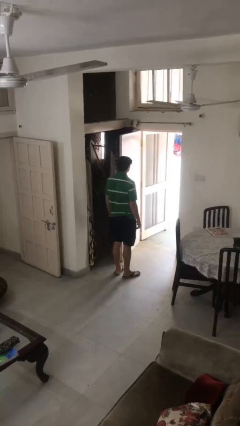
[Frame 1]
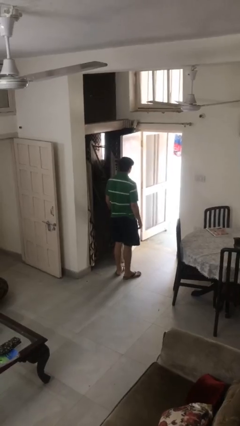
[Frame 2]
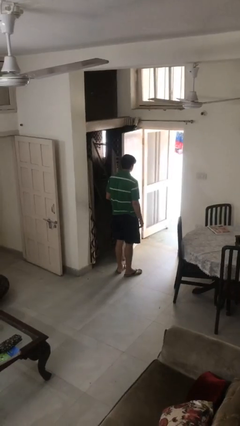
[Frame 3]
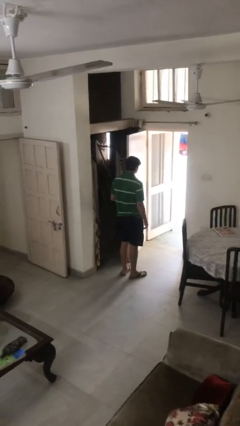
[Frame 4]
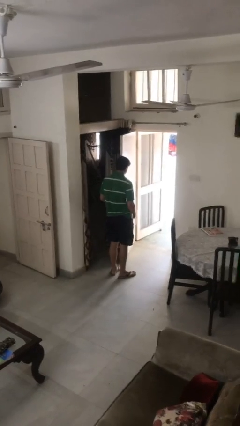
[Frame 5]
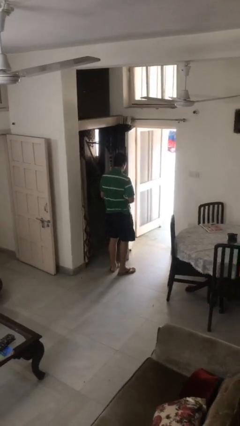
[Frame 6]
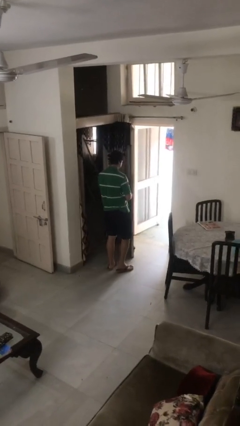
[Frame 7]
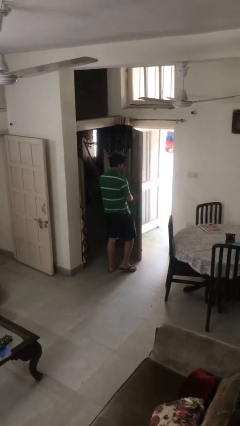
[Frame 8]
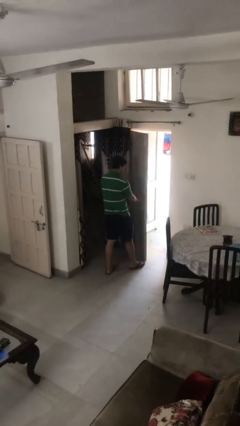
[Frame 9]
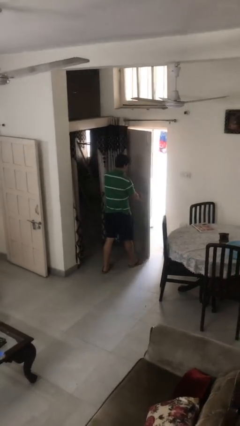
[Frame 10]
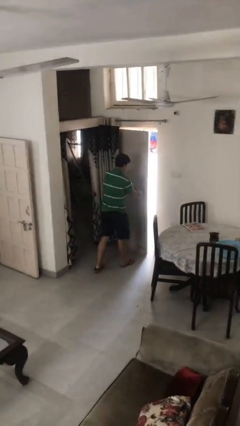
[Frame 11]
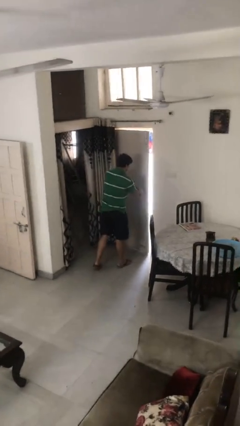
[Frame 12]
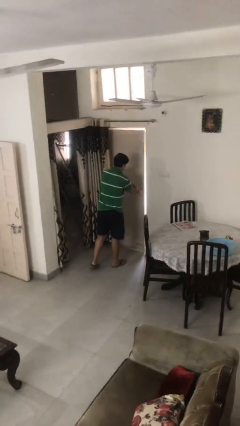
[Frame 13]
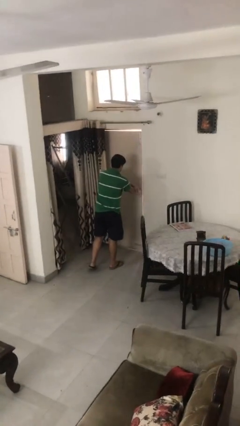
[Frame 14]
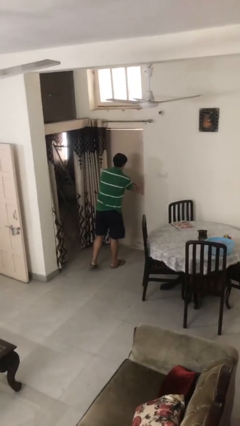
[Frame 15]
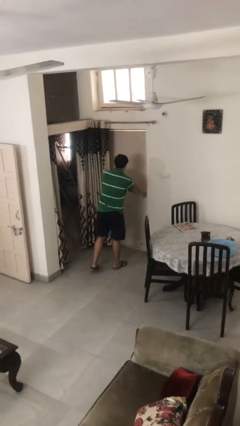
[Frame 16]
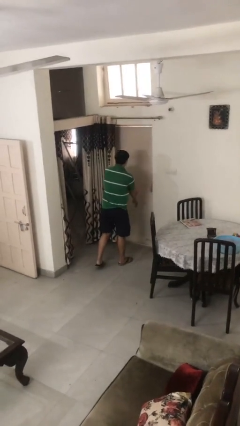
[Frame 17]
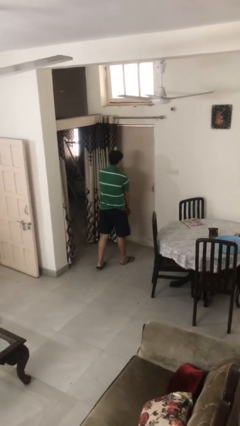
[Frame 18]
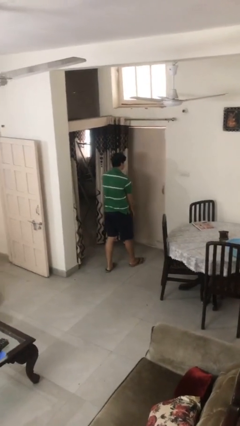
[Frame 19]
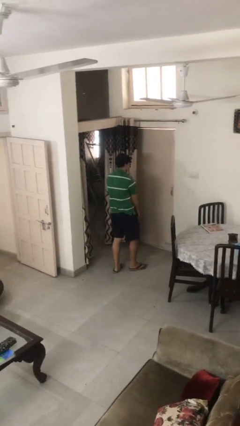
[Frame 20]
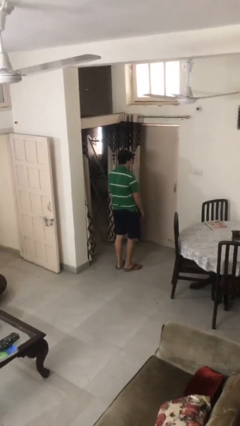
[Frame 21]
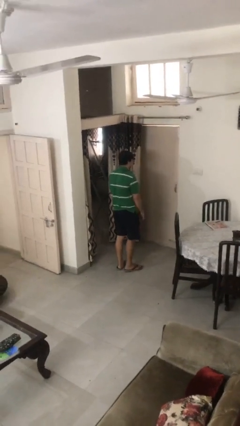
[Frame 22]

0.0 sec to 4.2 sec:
person closes facility door

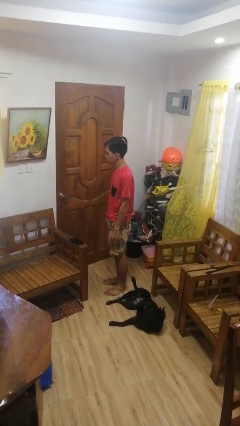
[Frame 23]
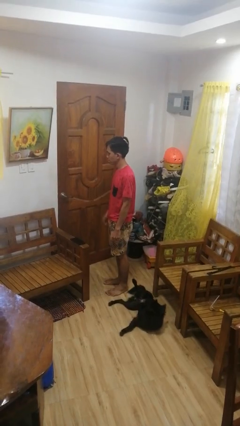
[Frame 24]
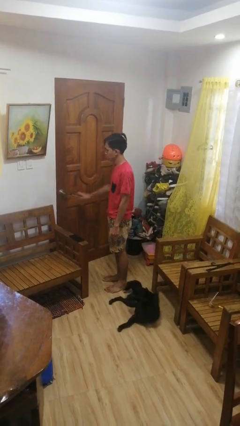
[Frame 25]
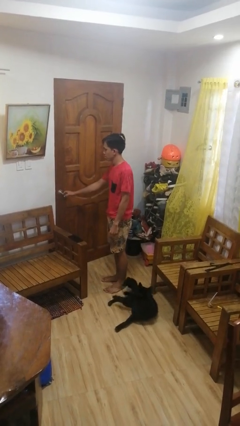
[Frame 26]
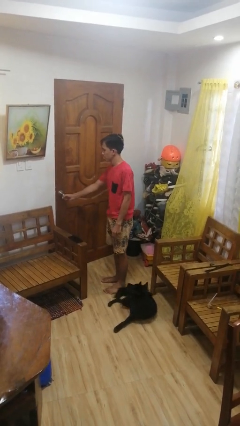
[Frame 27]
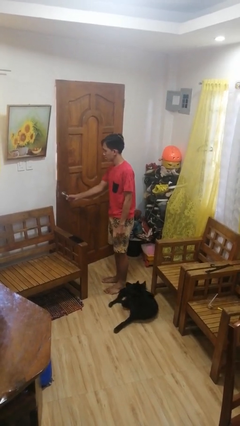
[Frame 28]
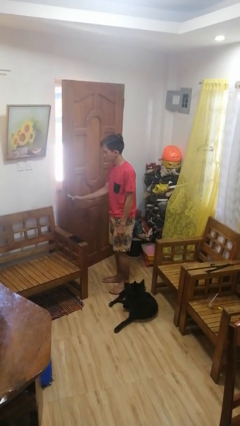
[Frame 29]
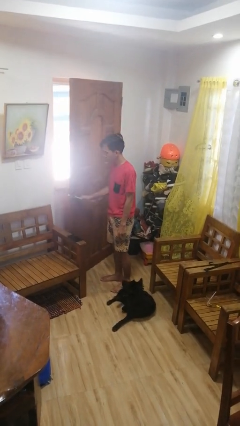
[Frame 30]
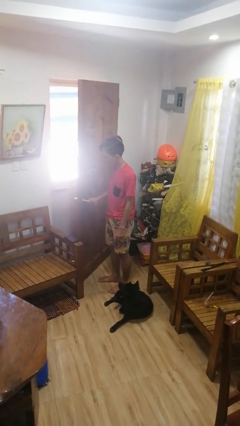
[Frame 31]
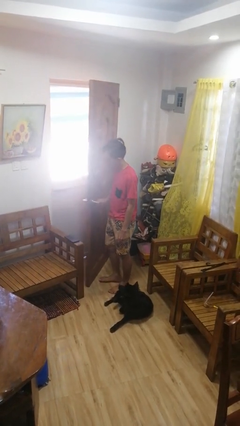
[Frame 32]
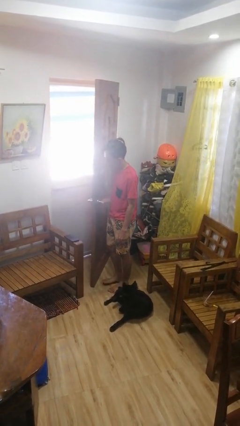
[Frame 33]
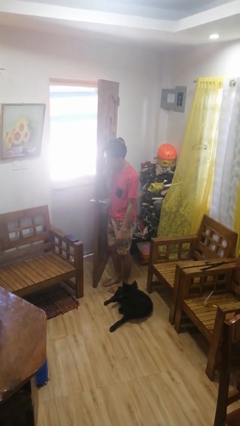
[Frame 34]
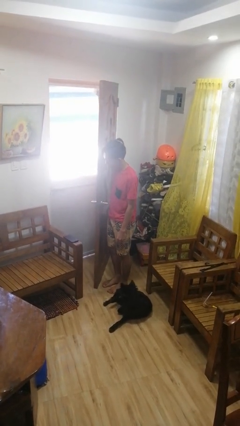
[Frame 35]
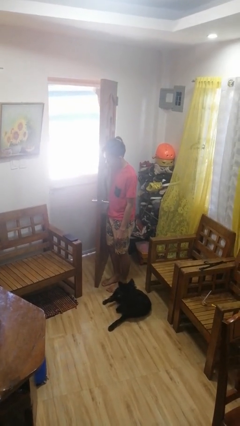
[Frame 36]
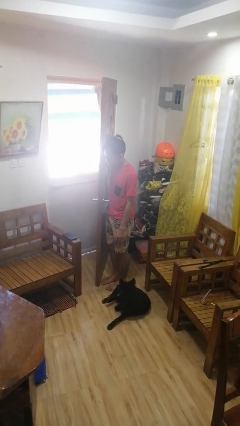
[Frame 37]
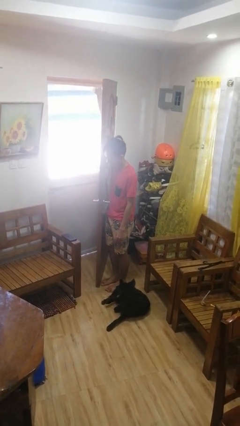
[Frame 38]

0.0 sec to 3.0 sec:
person opens facility door

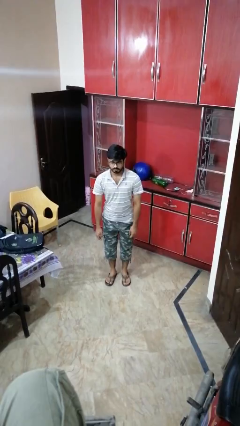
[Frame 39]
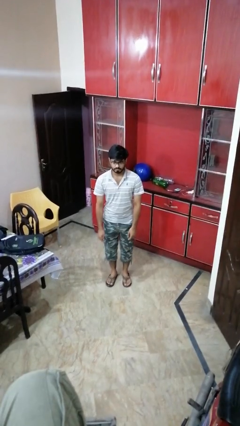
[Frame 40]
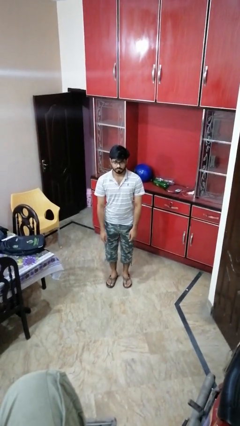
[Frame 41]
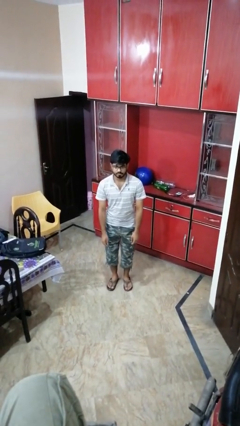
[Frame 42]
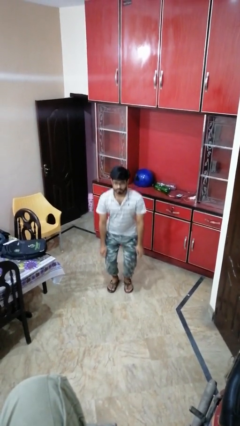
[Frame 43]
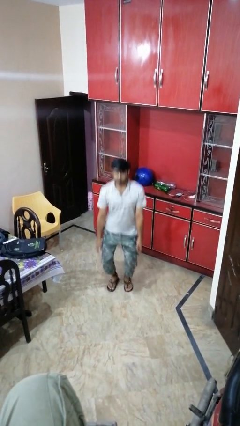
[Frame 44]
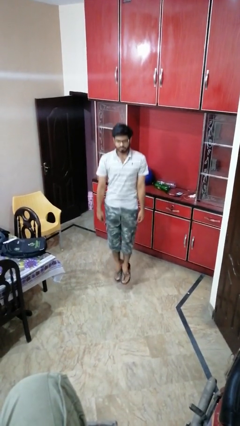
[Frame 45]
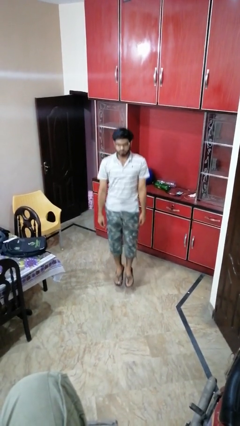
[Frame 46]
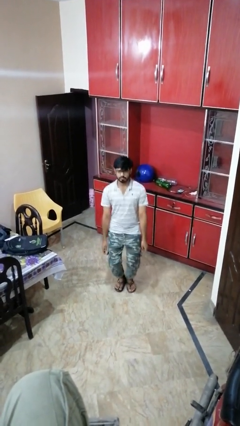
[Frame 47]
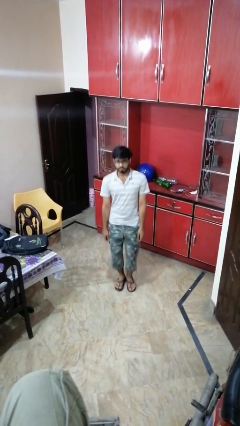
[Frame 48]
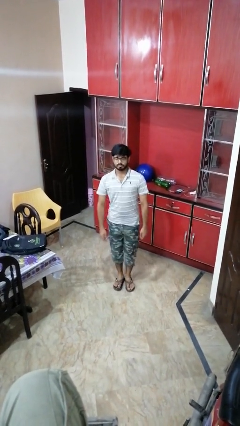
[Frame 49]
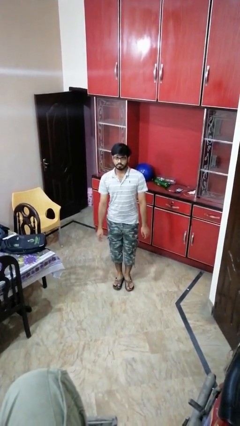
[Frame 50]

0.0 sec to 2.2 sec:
person jumps

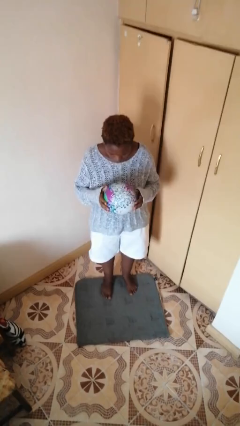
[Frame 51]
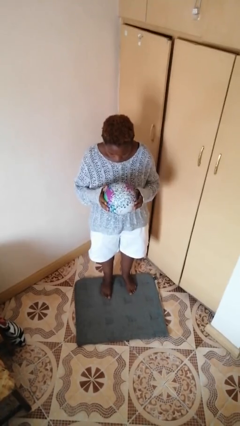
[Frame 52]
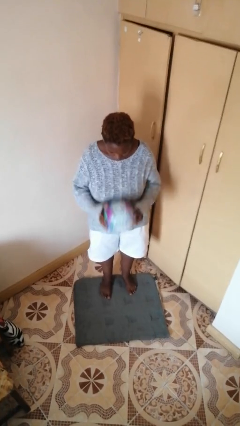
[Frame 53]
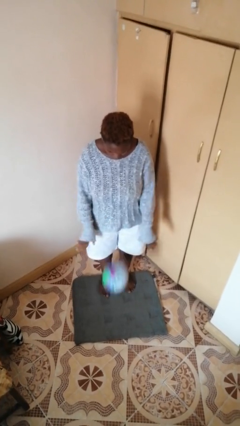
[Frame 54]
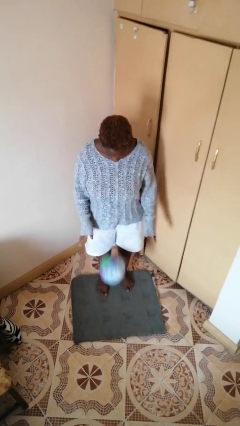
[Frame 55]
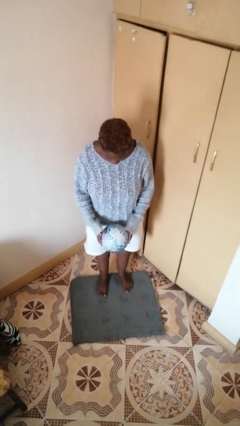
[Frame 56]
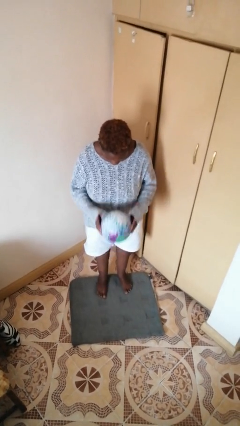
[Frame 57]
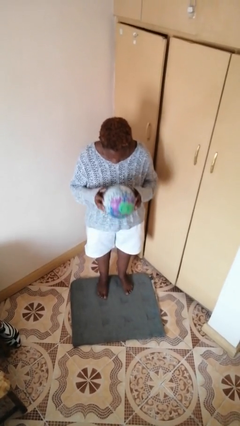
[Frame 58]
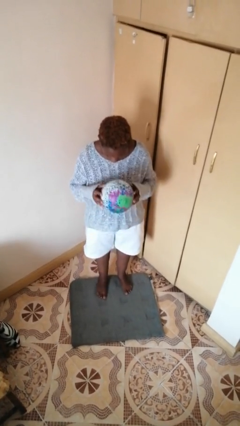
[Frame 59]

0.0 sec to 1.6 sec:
person bounces ball on floor

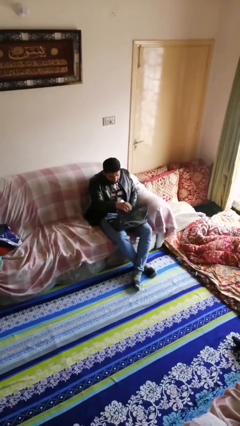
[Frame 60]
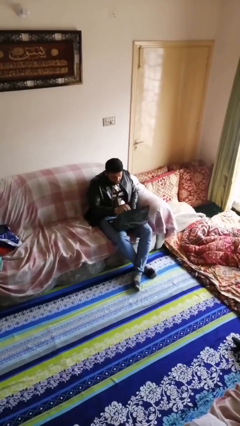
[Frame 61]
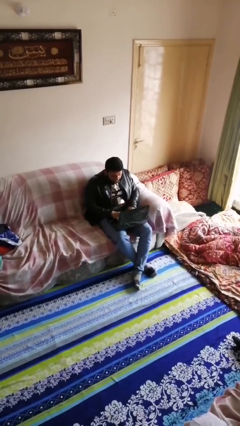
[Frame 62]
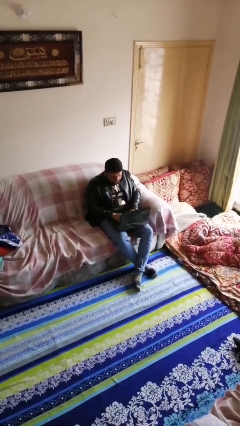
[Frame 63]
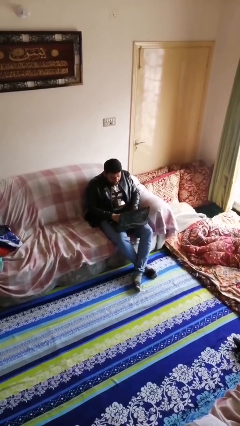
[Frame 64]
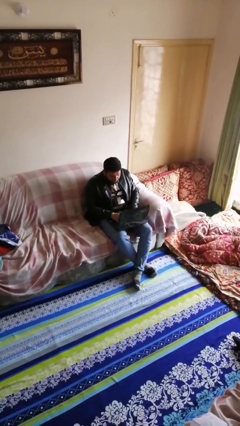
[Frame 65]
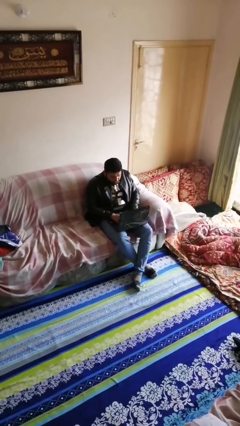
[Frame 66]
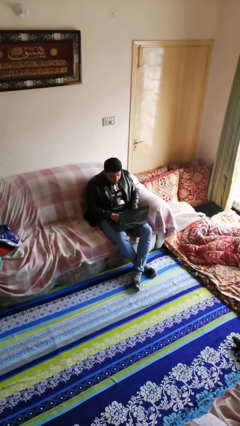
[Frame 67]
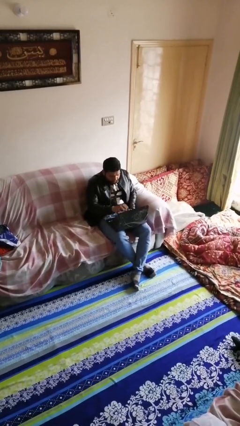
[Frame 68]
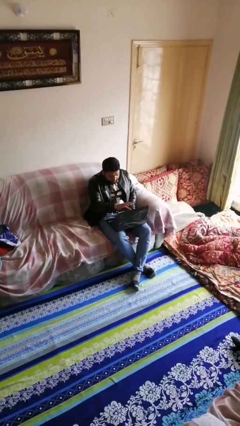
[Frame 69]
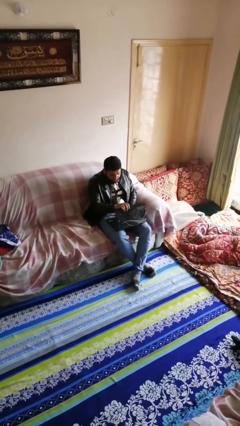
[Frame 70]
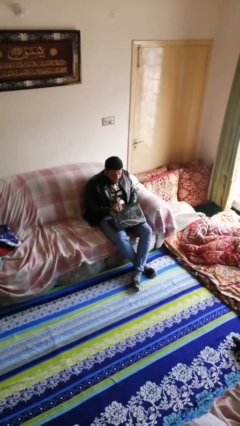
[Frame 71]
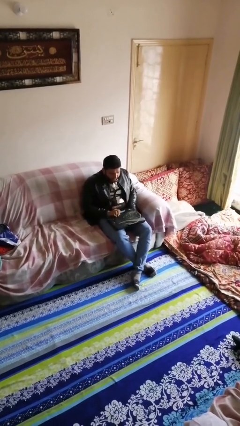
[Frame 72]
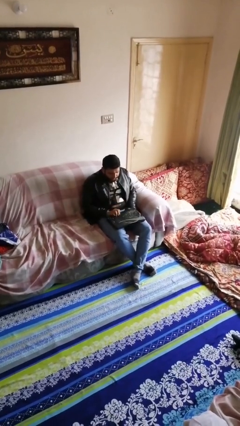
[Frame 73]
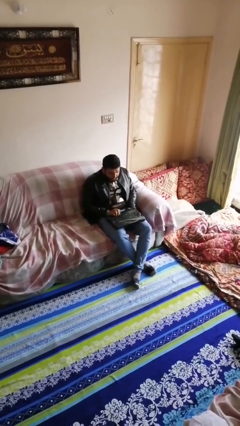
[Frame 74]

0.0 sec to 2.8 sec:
person interacts with laptop

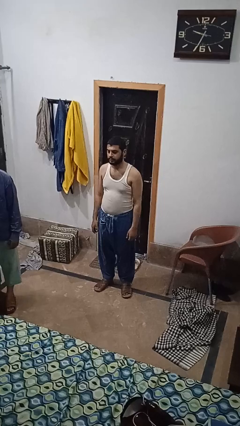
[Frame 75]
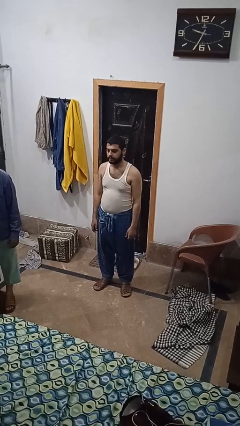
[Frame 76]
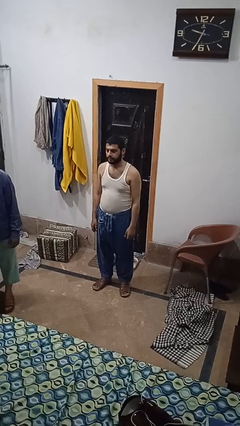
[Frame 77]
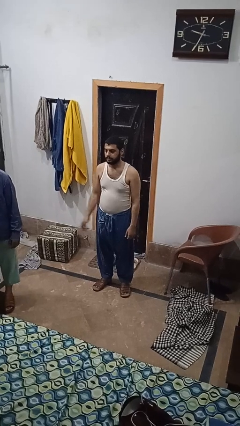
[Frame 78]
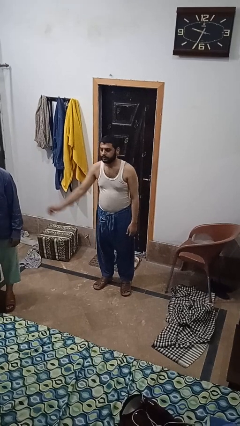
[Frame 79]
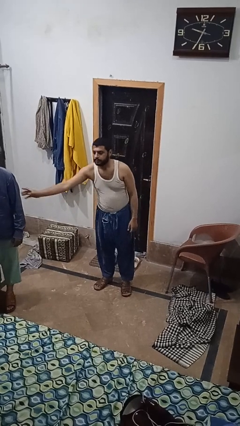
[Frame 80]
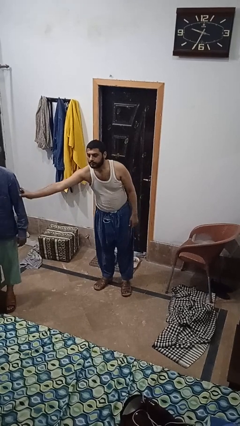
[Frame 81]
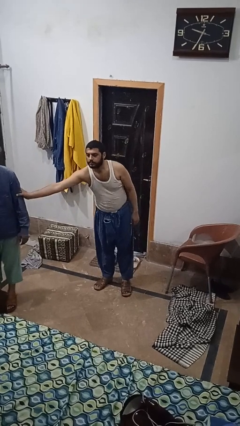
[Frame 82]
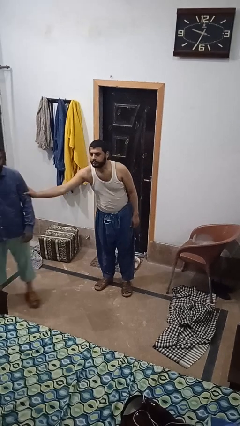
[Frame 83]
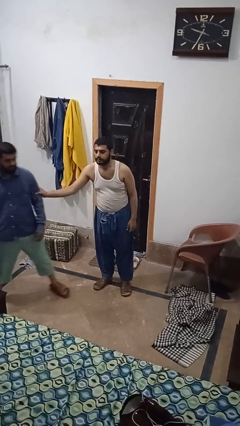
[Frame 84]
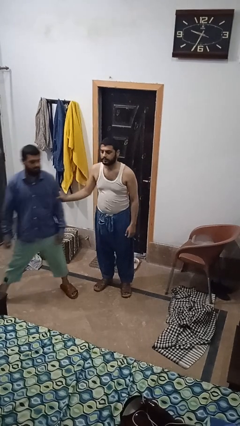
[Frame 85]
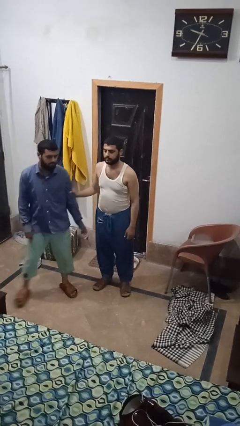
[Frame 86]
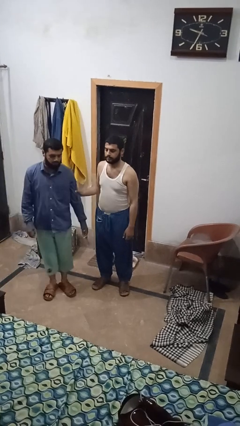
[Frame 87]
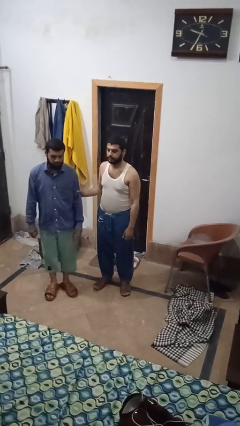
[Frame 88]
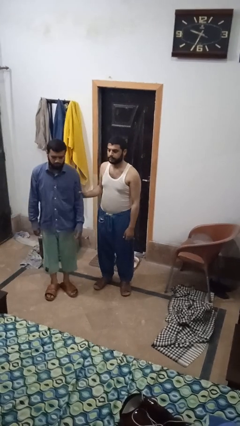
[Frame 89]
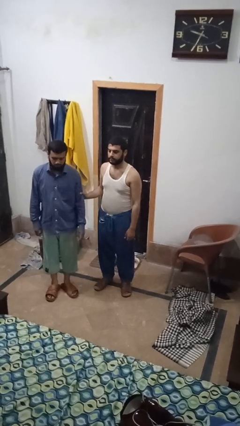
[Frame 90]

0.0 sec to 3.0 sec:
person grabs person by bicep

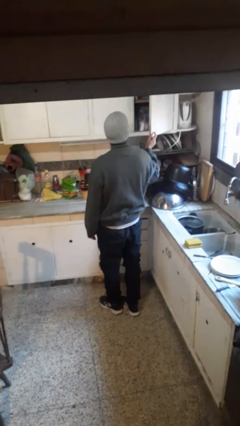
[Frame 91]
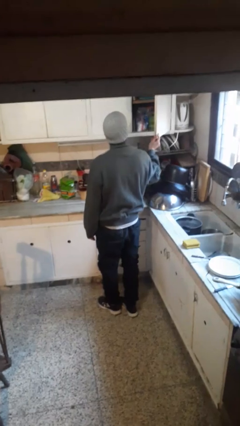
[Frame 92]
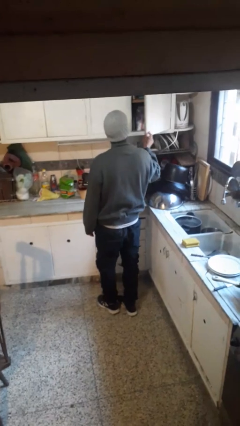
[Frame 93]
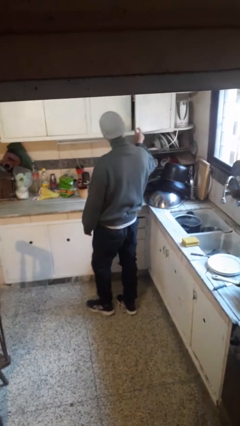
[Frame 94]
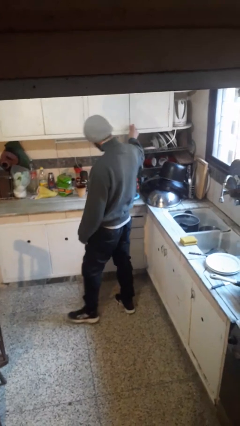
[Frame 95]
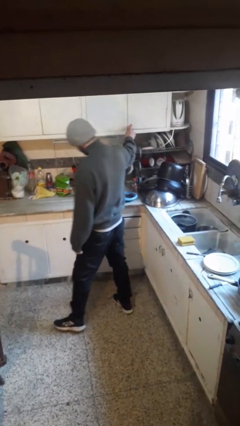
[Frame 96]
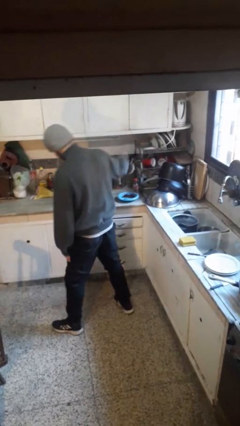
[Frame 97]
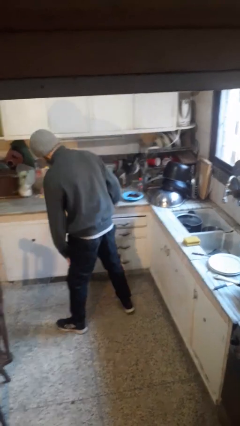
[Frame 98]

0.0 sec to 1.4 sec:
person closes cabinet
